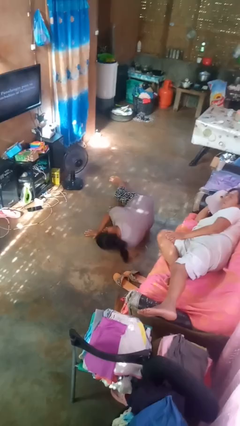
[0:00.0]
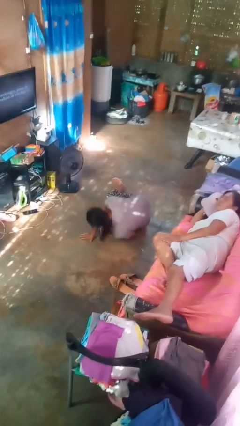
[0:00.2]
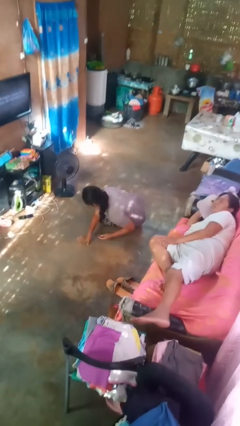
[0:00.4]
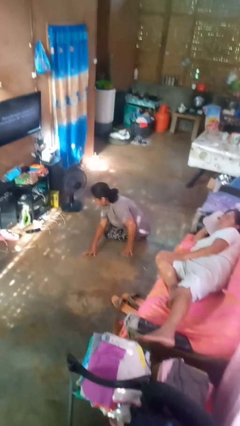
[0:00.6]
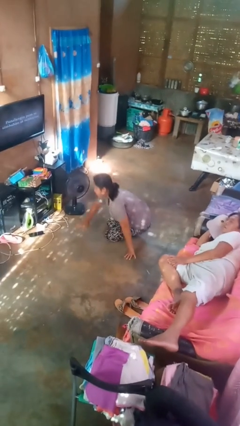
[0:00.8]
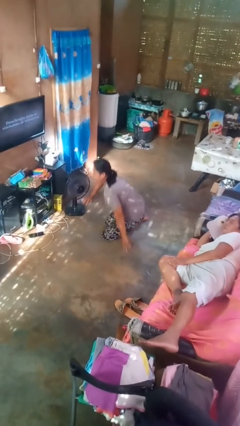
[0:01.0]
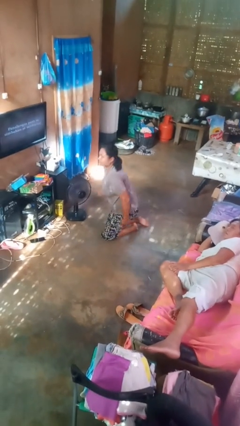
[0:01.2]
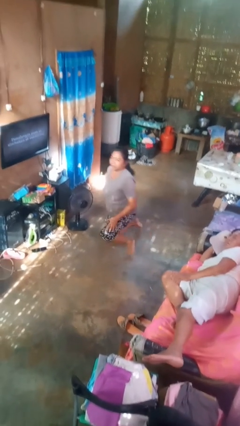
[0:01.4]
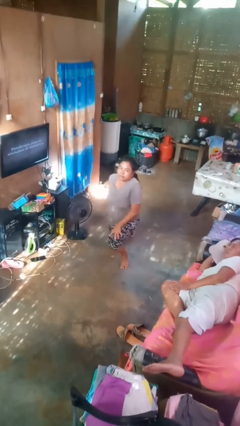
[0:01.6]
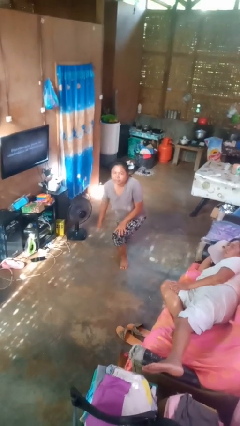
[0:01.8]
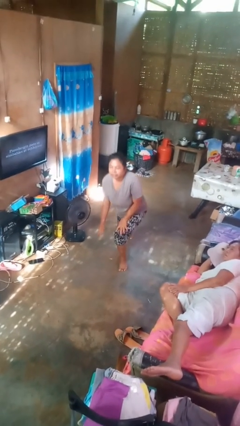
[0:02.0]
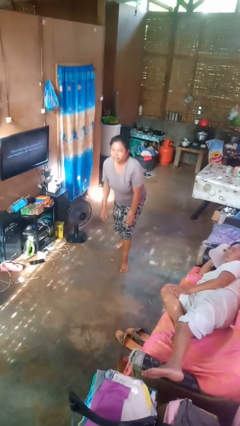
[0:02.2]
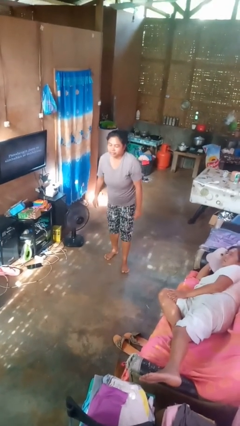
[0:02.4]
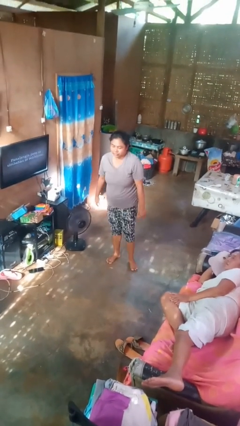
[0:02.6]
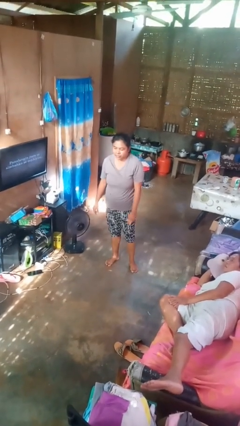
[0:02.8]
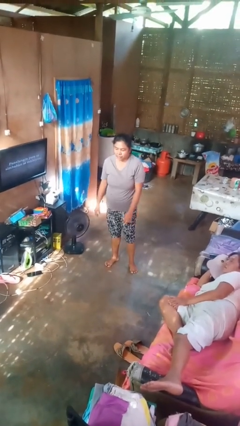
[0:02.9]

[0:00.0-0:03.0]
person stands up from floor

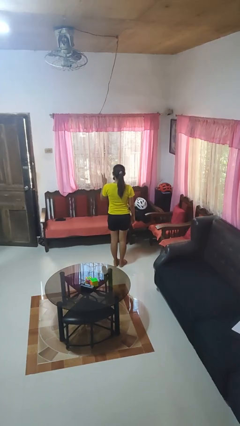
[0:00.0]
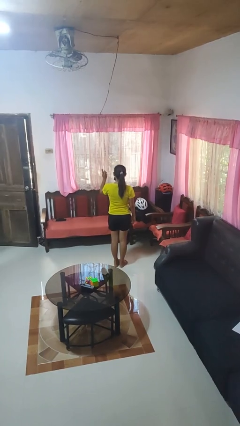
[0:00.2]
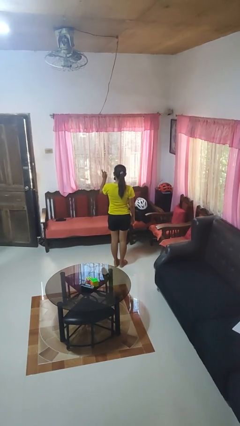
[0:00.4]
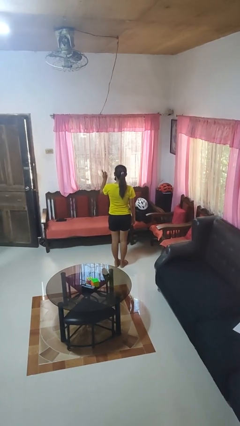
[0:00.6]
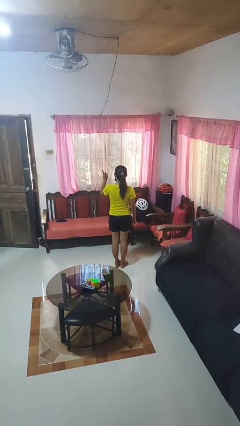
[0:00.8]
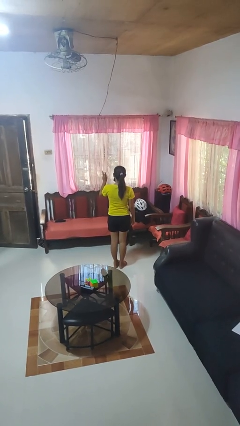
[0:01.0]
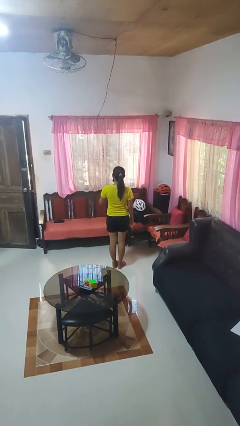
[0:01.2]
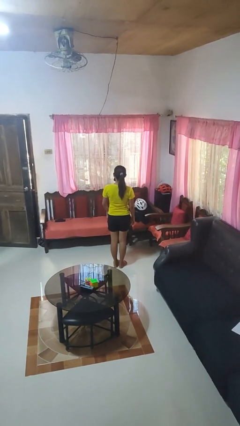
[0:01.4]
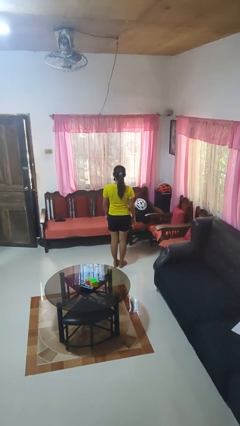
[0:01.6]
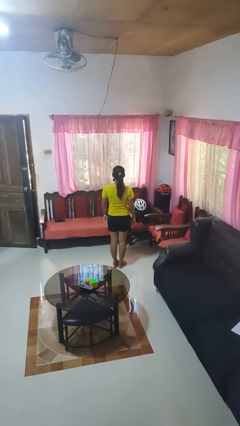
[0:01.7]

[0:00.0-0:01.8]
person gestures number three

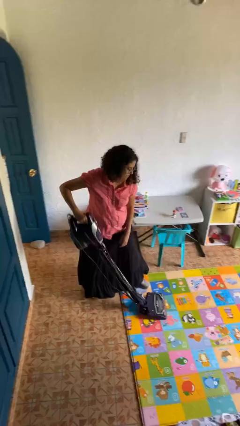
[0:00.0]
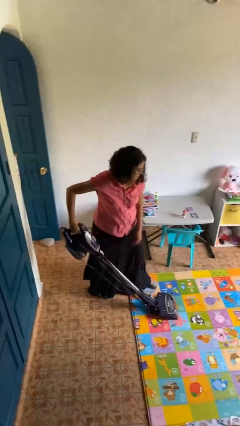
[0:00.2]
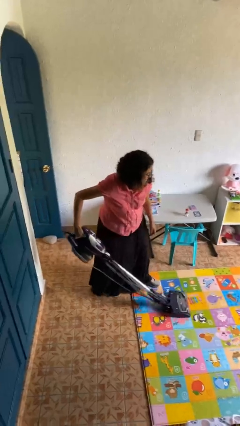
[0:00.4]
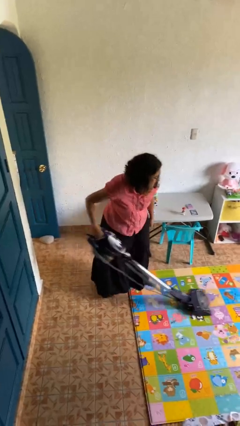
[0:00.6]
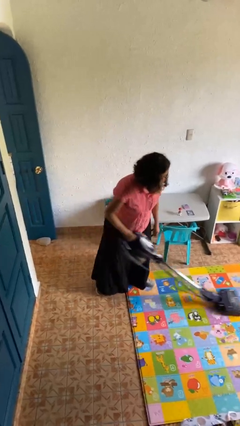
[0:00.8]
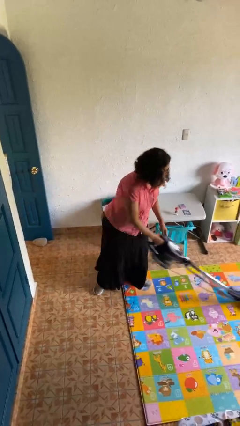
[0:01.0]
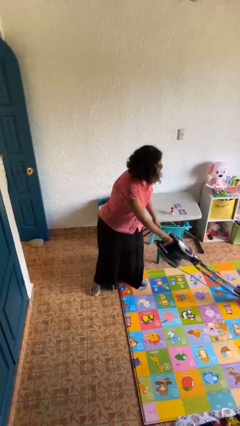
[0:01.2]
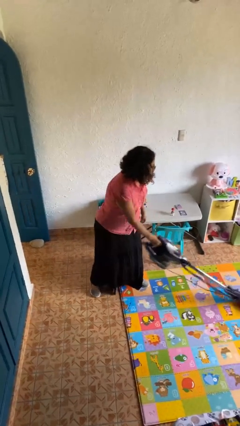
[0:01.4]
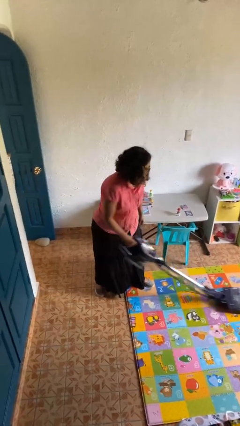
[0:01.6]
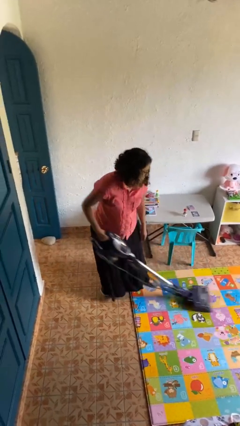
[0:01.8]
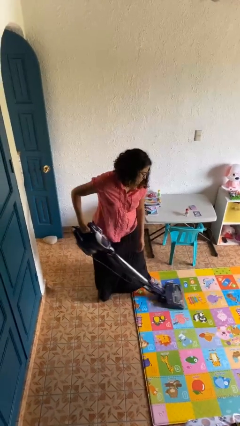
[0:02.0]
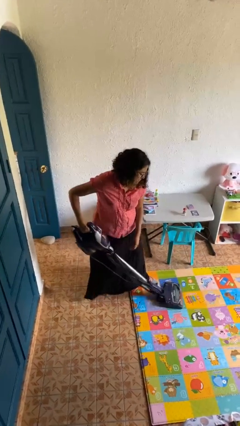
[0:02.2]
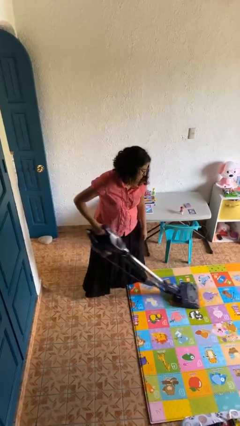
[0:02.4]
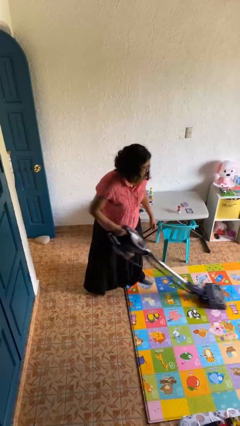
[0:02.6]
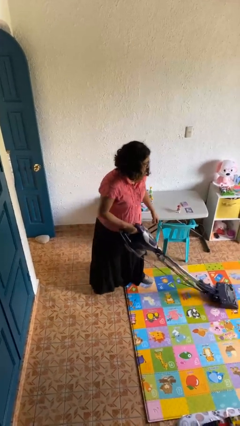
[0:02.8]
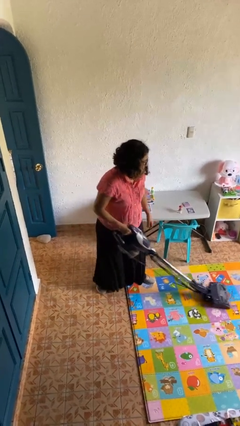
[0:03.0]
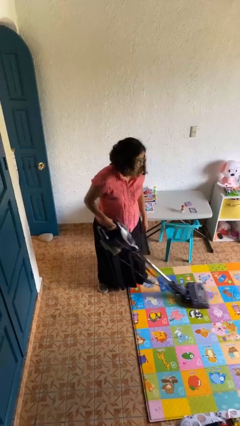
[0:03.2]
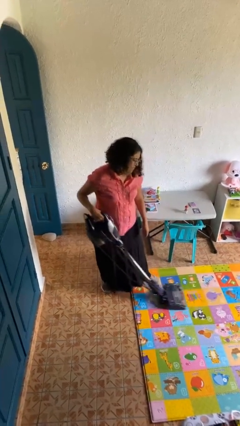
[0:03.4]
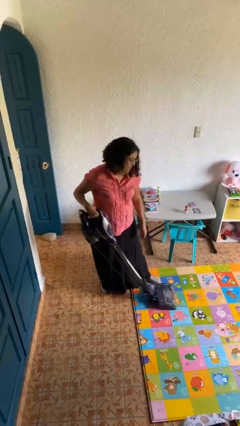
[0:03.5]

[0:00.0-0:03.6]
person vacuums carpet

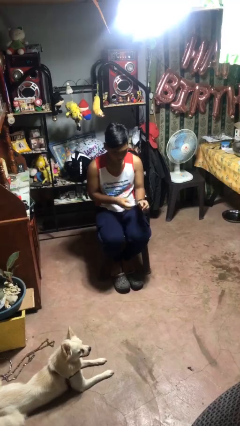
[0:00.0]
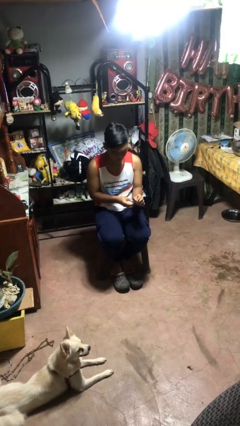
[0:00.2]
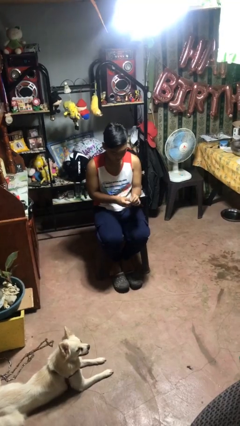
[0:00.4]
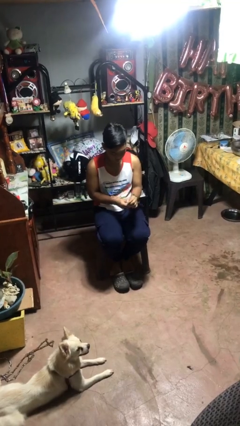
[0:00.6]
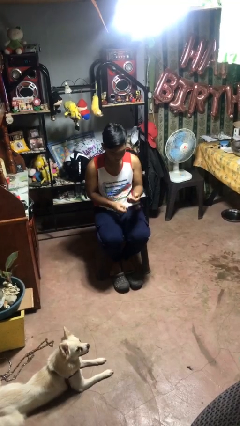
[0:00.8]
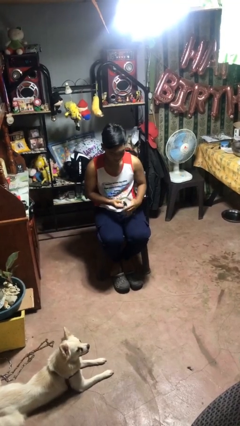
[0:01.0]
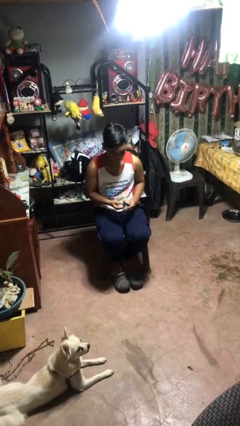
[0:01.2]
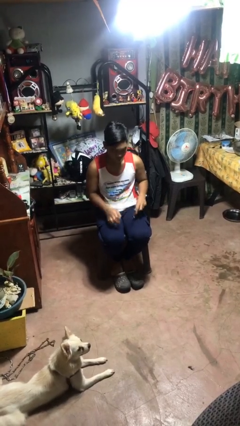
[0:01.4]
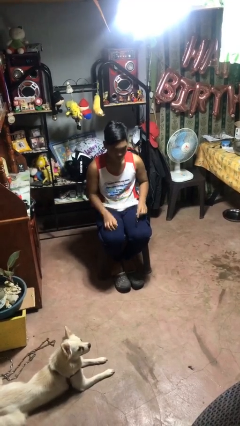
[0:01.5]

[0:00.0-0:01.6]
person takes off wristwatch

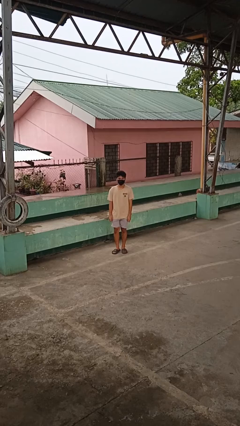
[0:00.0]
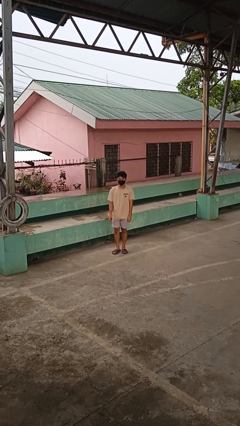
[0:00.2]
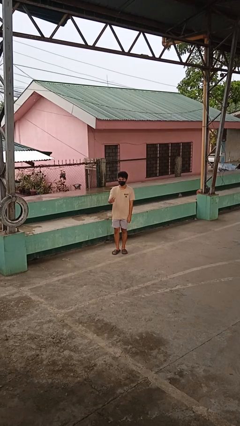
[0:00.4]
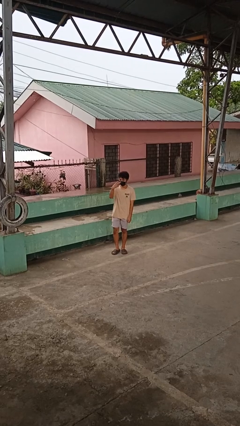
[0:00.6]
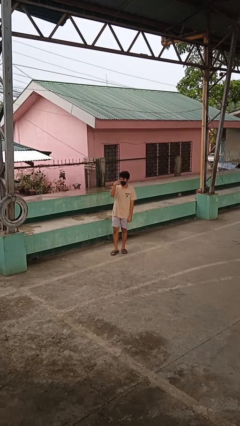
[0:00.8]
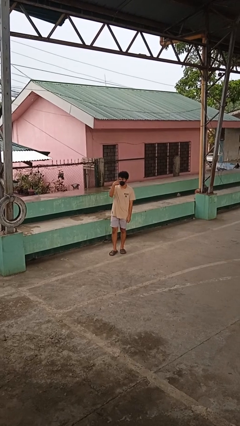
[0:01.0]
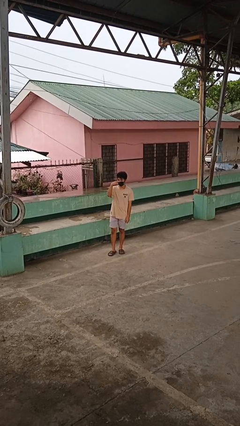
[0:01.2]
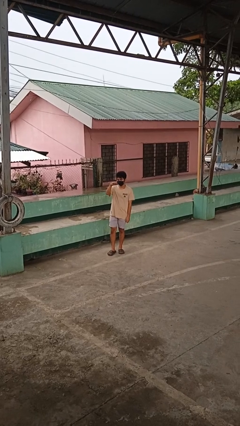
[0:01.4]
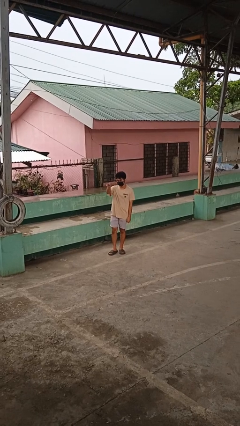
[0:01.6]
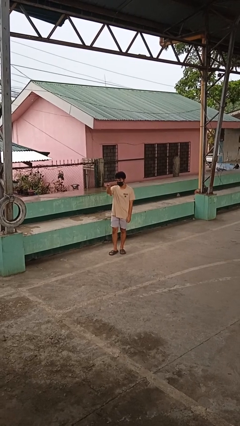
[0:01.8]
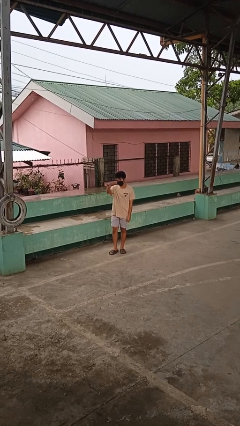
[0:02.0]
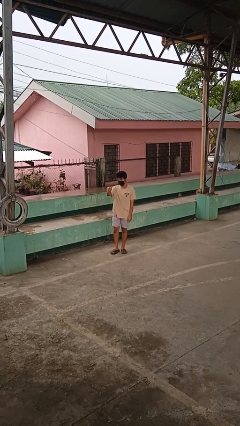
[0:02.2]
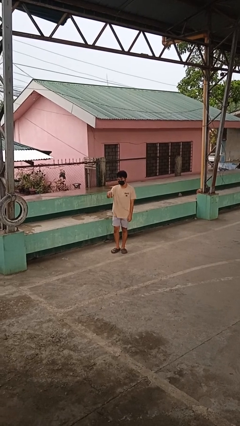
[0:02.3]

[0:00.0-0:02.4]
person gestures watch closely

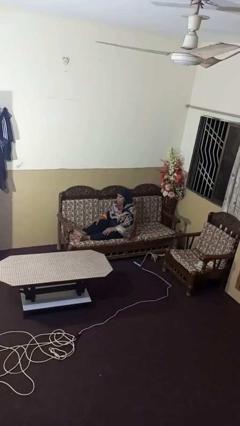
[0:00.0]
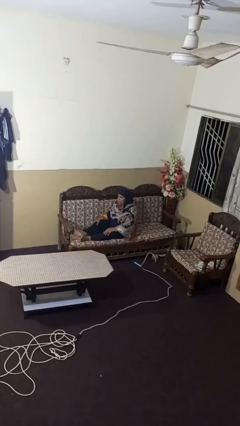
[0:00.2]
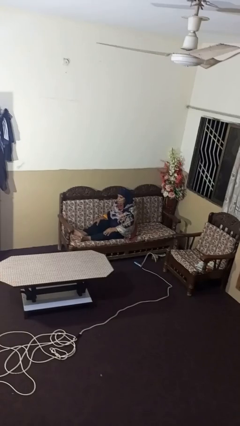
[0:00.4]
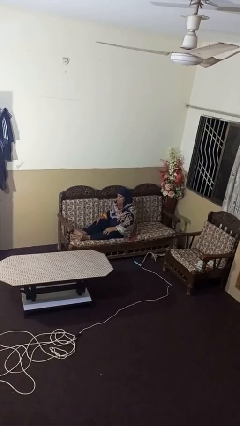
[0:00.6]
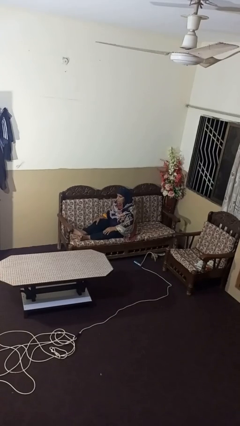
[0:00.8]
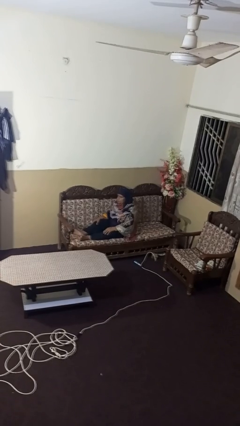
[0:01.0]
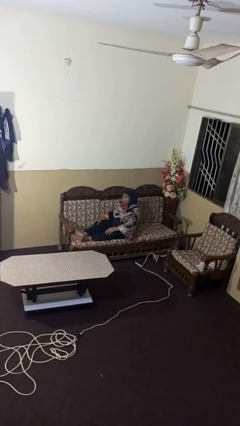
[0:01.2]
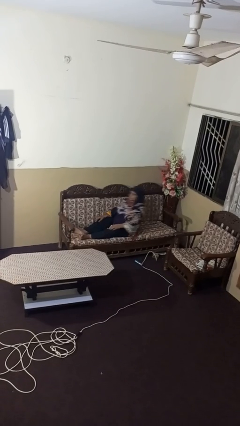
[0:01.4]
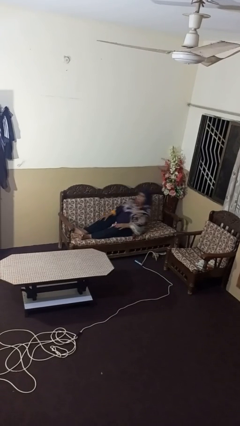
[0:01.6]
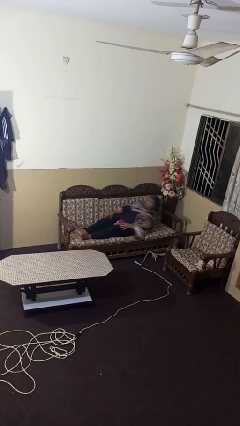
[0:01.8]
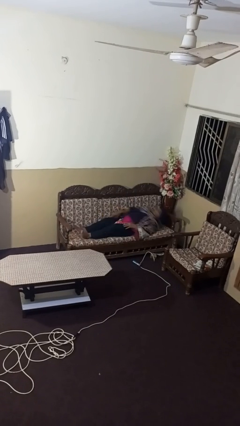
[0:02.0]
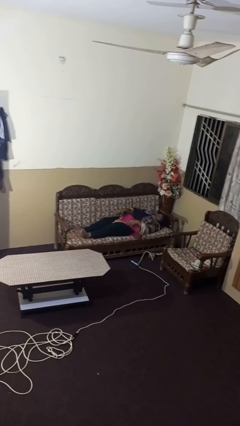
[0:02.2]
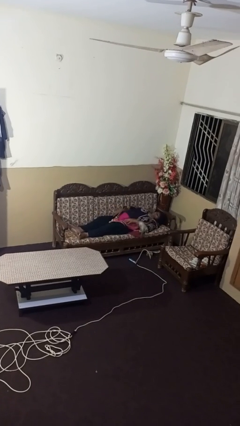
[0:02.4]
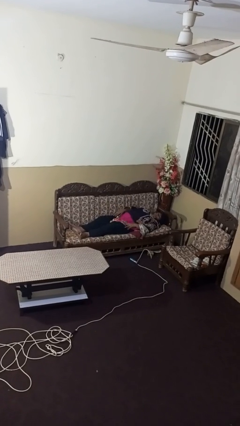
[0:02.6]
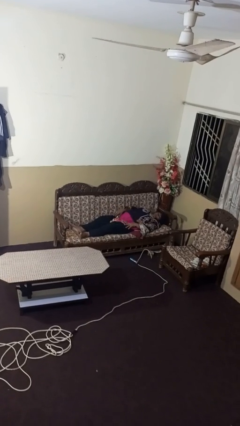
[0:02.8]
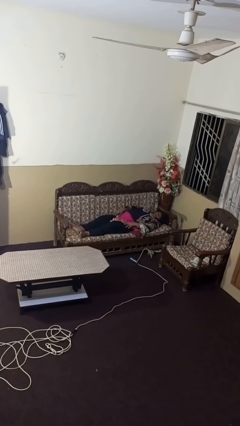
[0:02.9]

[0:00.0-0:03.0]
person lies down on couch

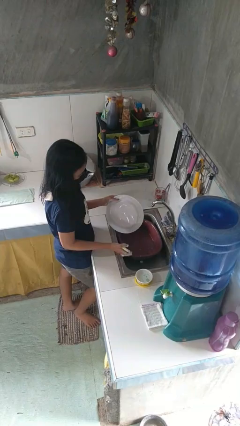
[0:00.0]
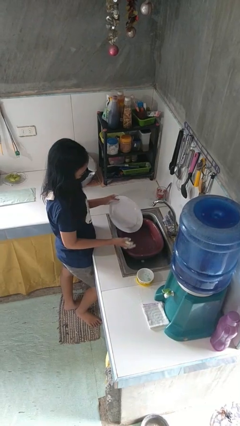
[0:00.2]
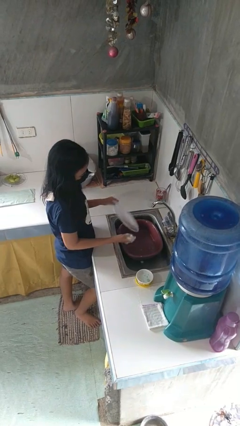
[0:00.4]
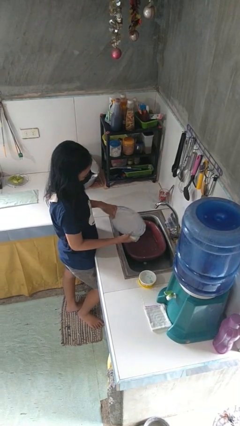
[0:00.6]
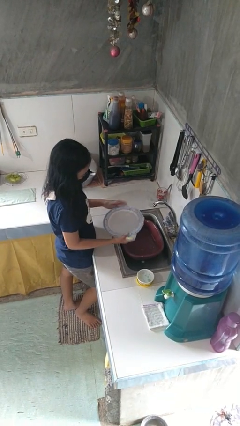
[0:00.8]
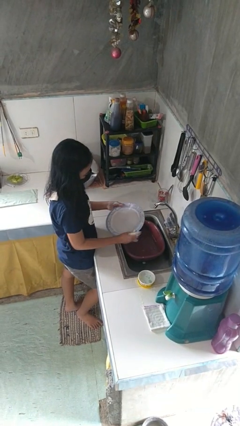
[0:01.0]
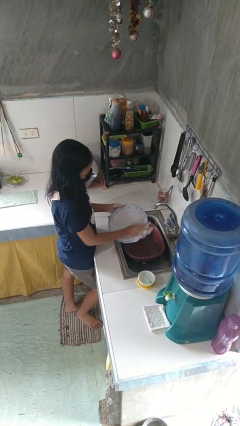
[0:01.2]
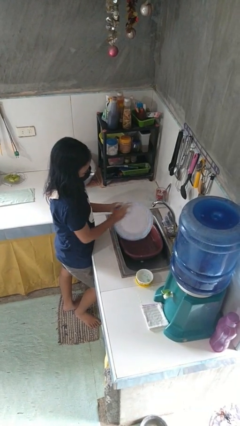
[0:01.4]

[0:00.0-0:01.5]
person washes dish
